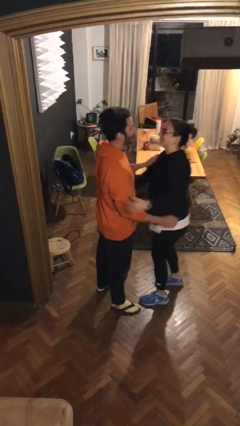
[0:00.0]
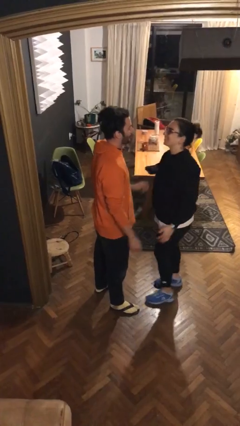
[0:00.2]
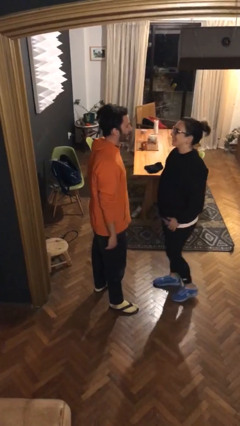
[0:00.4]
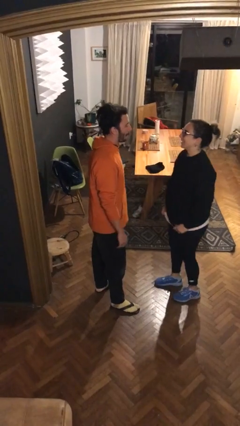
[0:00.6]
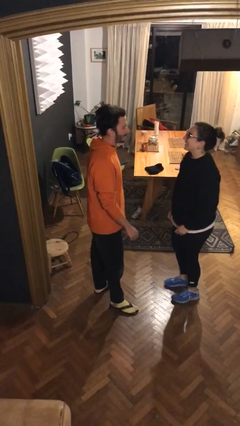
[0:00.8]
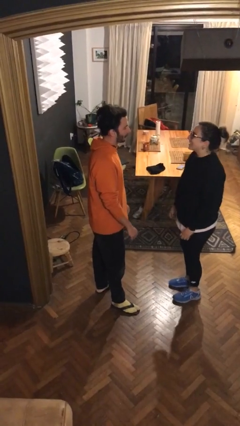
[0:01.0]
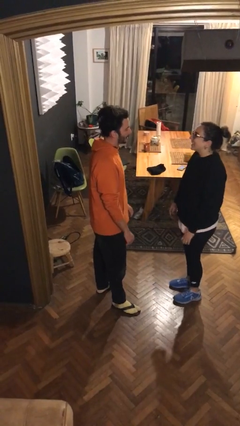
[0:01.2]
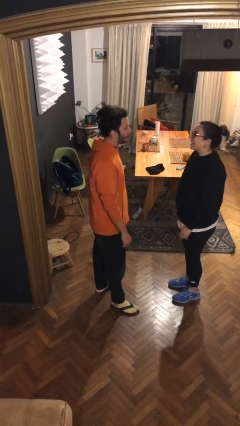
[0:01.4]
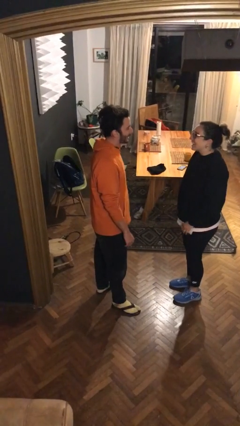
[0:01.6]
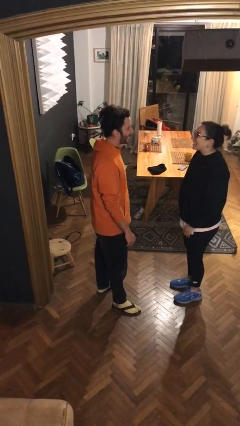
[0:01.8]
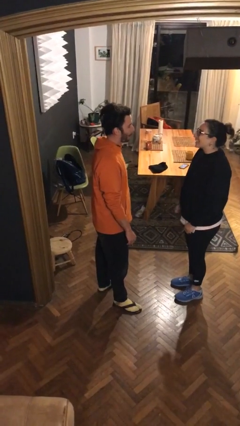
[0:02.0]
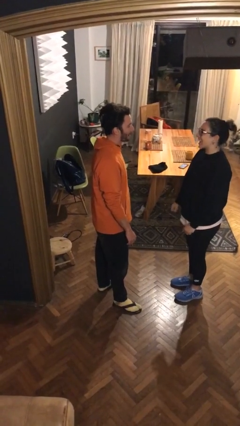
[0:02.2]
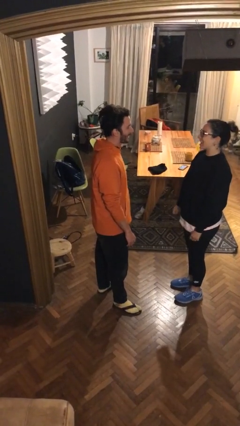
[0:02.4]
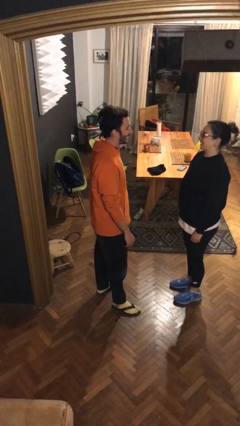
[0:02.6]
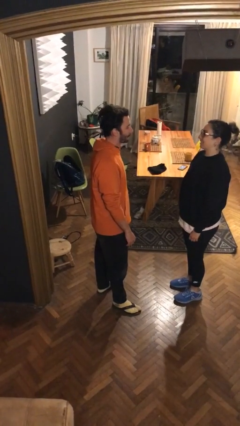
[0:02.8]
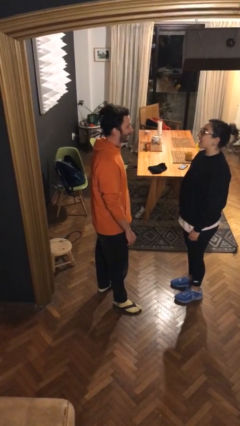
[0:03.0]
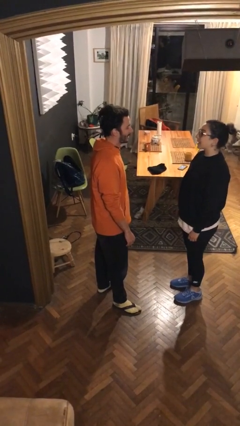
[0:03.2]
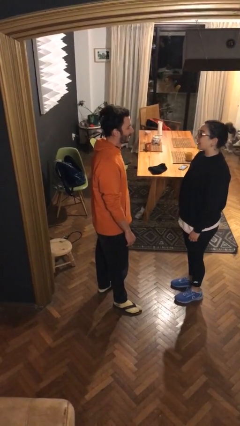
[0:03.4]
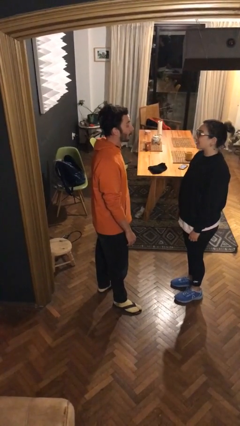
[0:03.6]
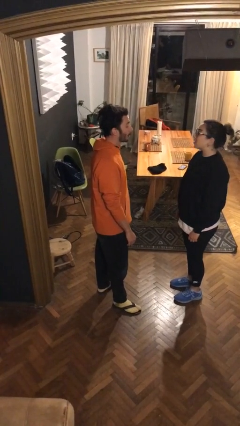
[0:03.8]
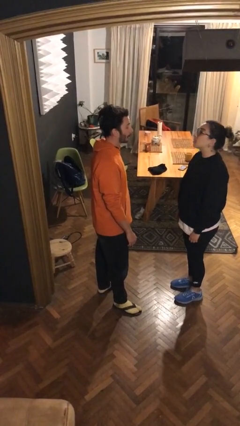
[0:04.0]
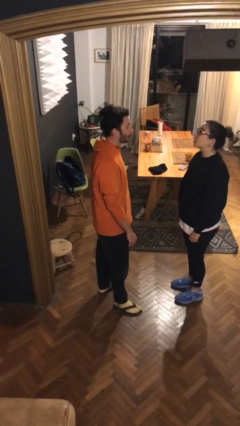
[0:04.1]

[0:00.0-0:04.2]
person talks to person

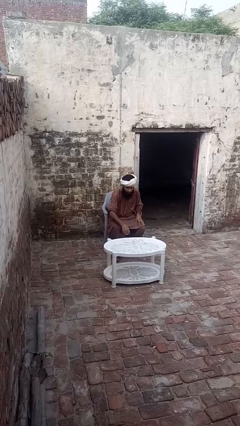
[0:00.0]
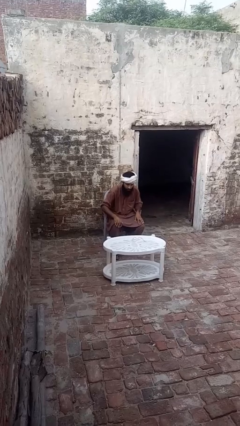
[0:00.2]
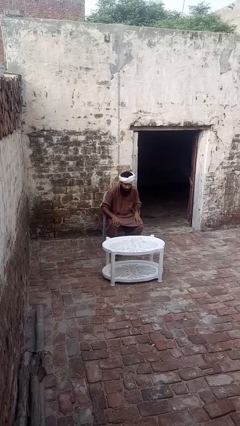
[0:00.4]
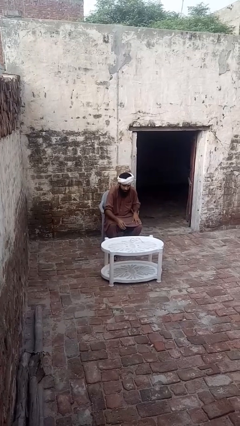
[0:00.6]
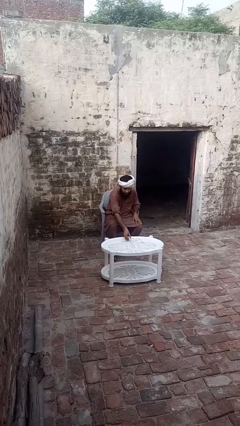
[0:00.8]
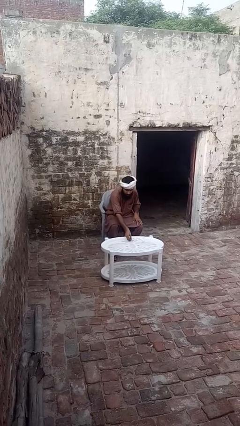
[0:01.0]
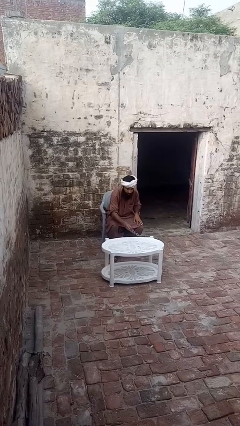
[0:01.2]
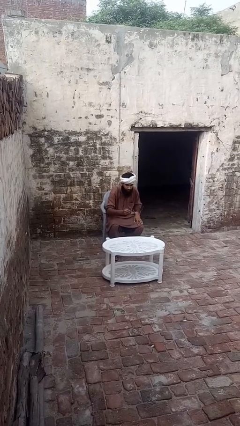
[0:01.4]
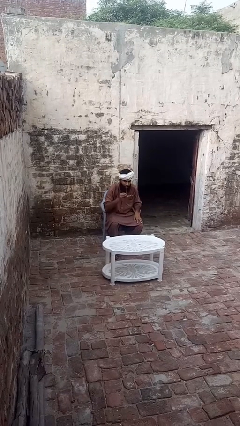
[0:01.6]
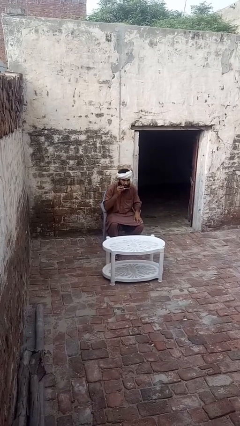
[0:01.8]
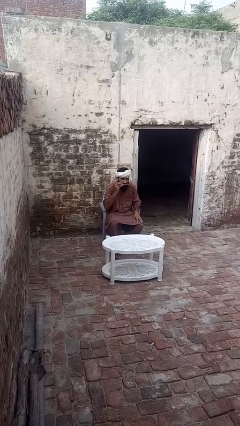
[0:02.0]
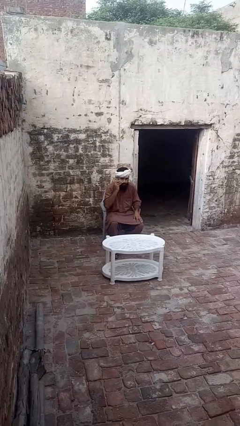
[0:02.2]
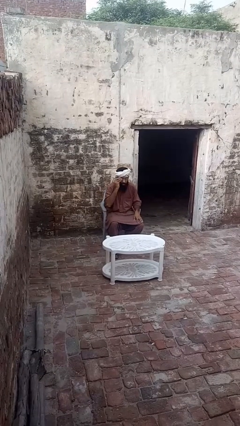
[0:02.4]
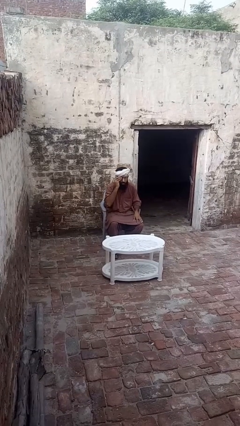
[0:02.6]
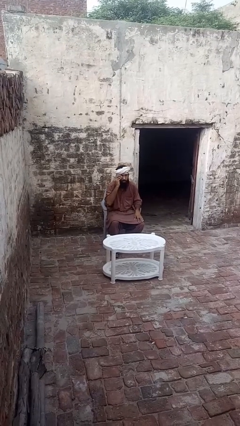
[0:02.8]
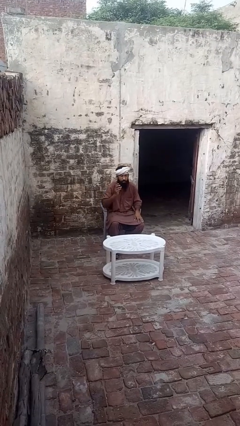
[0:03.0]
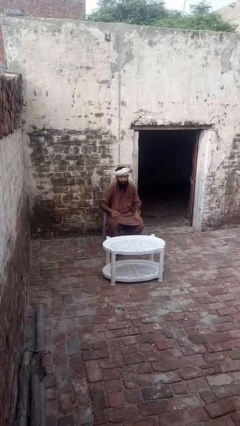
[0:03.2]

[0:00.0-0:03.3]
person puts on glasses

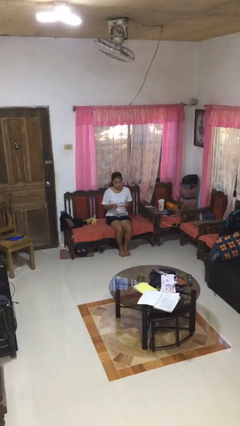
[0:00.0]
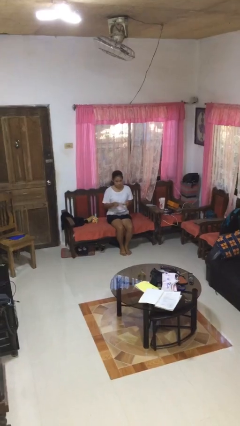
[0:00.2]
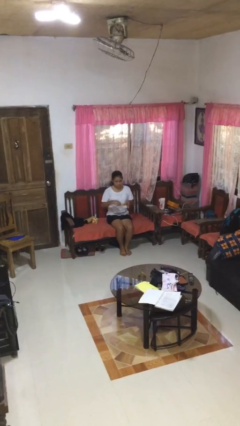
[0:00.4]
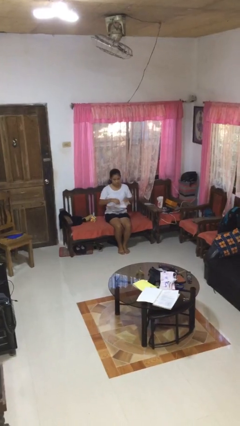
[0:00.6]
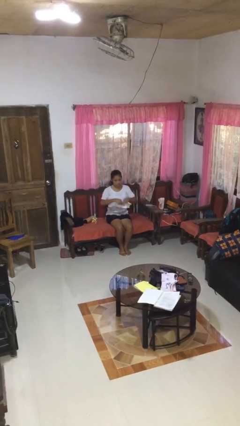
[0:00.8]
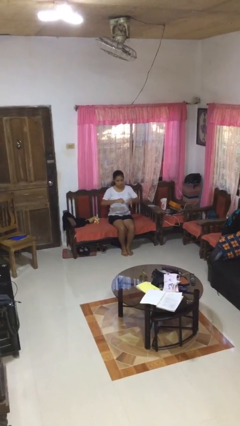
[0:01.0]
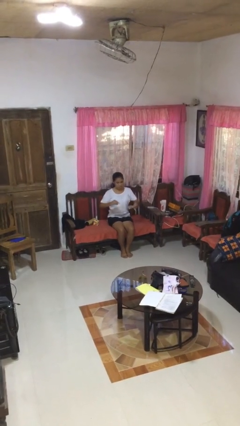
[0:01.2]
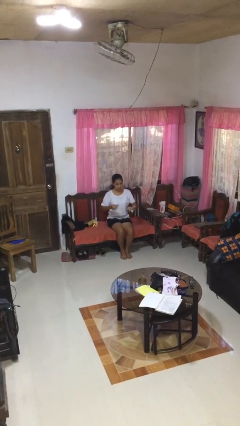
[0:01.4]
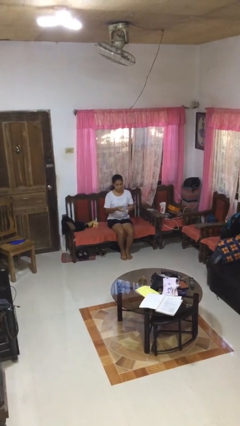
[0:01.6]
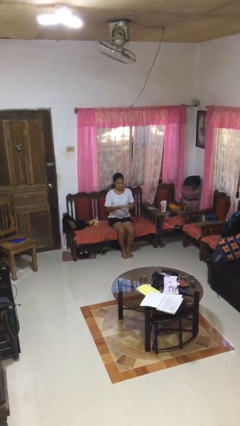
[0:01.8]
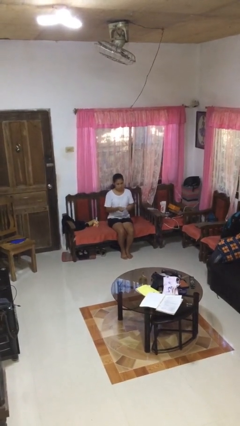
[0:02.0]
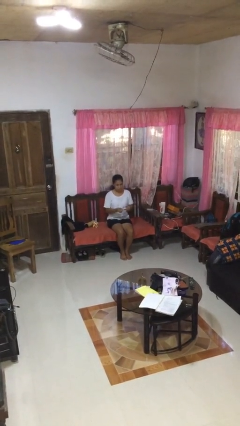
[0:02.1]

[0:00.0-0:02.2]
person tears paper

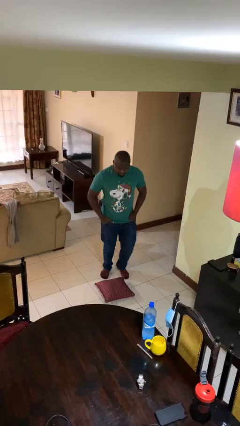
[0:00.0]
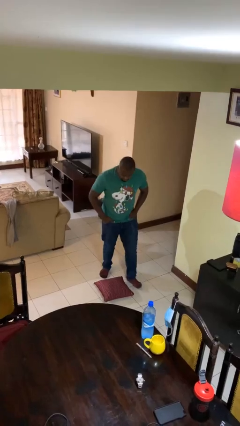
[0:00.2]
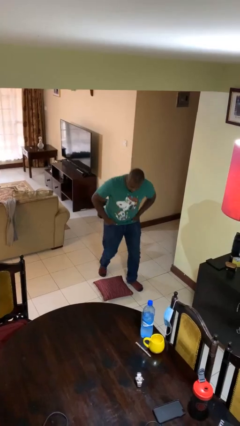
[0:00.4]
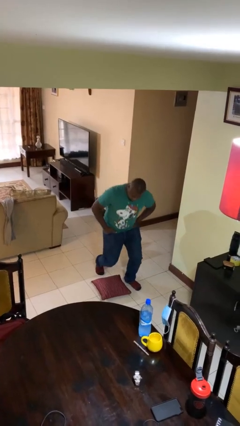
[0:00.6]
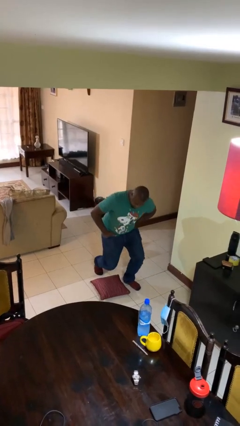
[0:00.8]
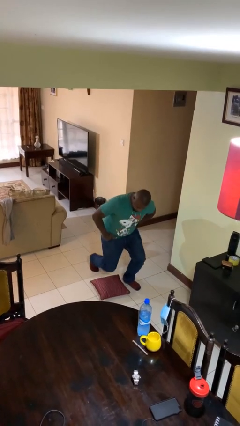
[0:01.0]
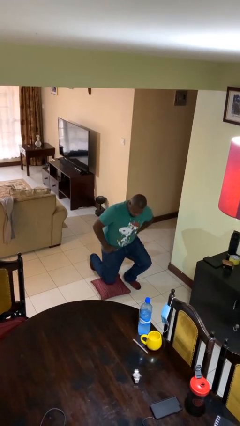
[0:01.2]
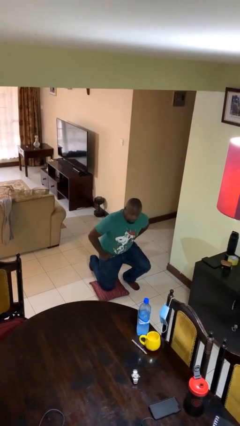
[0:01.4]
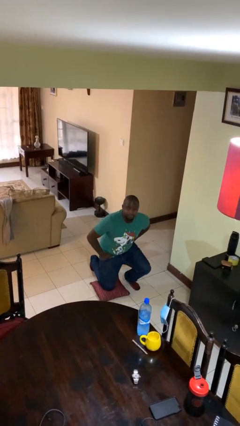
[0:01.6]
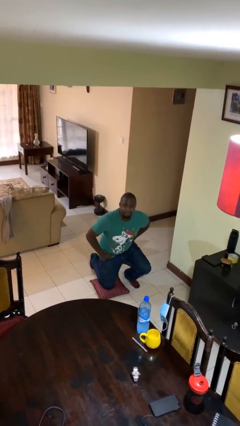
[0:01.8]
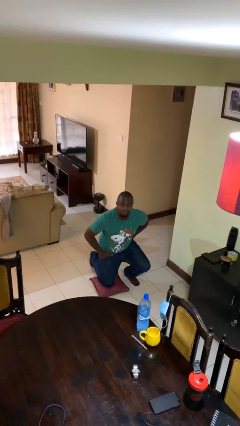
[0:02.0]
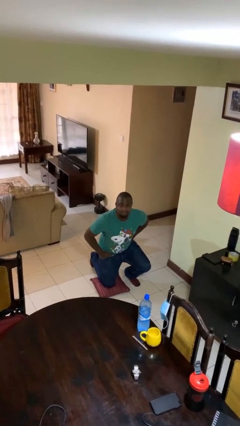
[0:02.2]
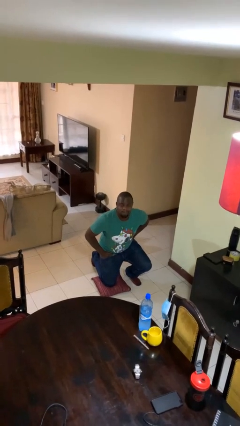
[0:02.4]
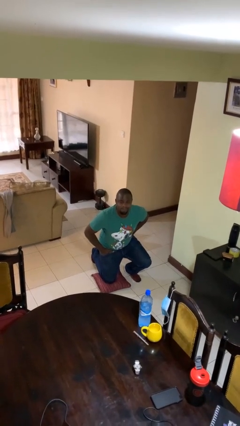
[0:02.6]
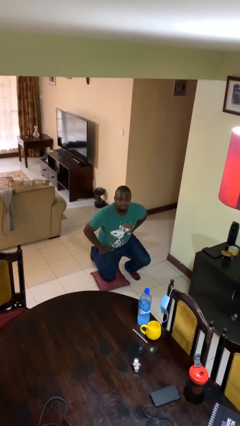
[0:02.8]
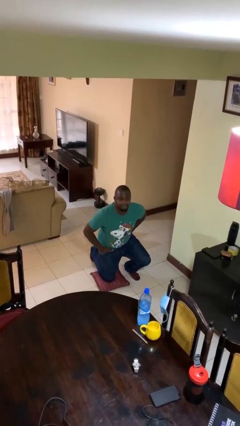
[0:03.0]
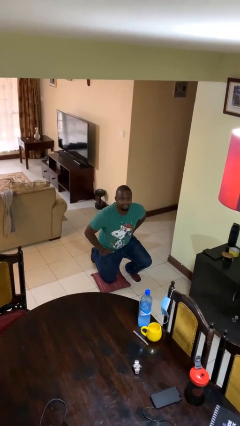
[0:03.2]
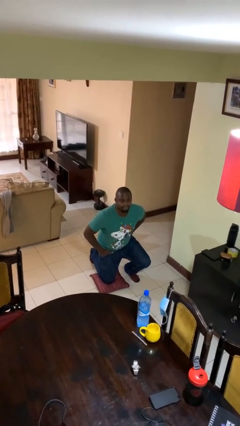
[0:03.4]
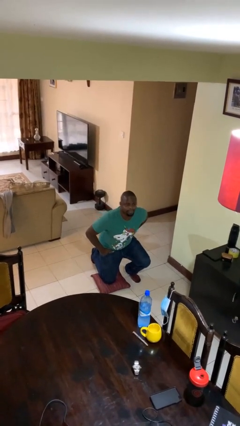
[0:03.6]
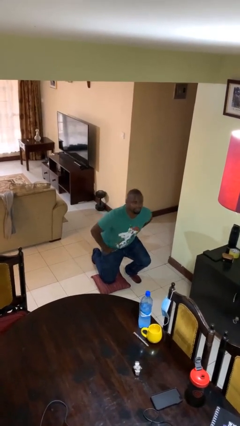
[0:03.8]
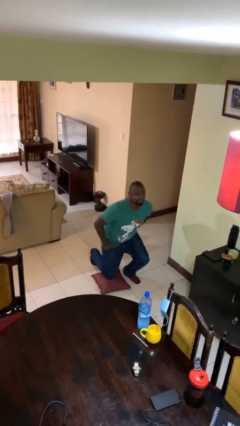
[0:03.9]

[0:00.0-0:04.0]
person kneels

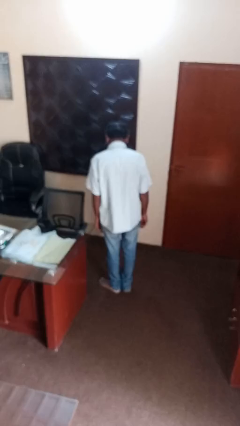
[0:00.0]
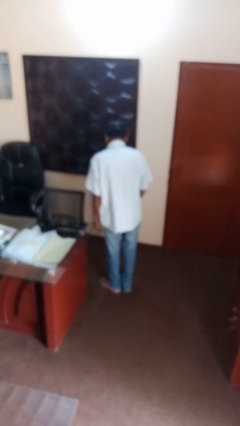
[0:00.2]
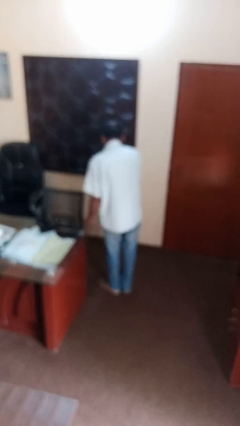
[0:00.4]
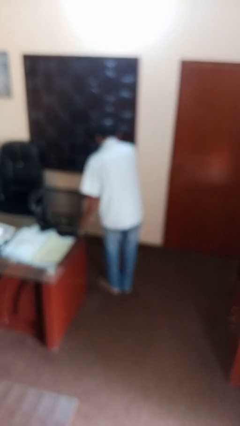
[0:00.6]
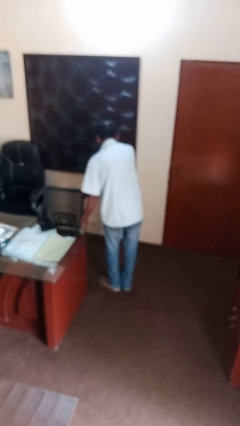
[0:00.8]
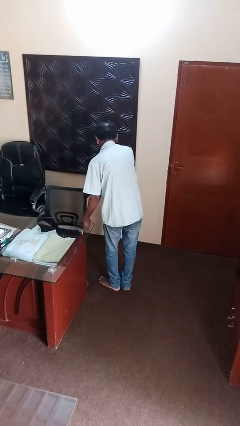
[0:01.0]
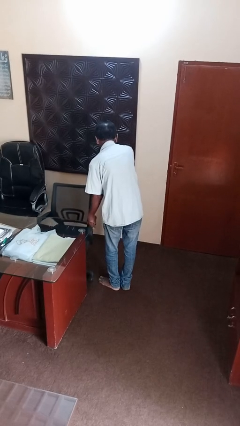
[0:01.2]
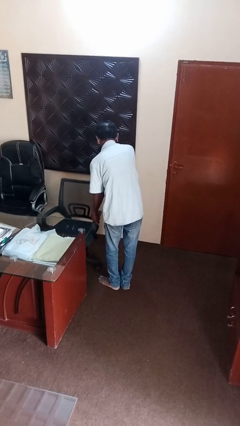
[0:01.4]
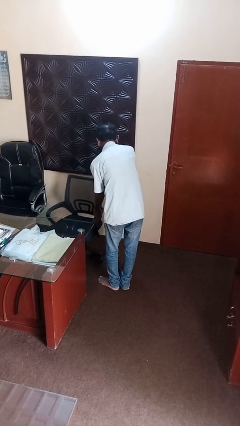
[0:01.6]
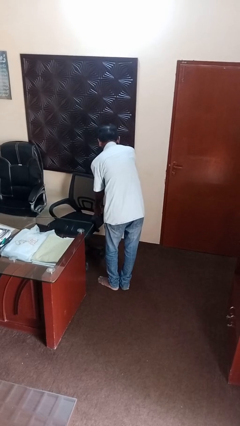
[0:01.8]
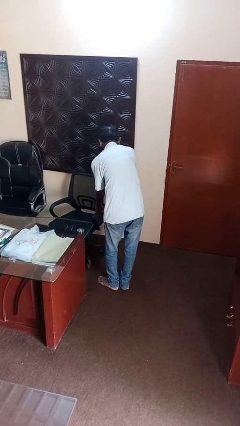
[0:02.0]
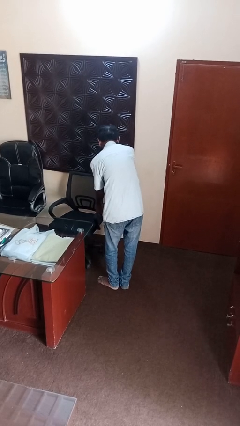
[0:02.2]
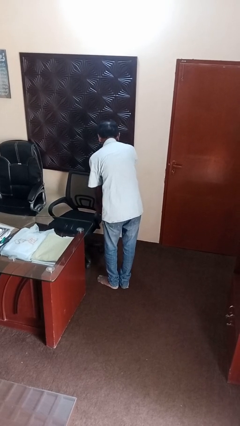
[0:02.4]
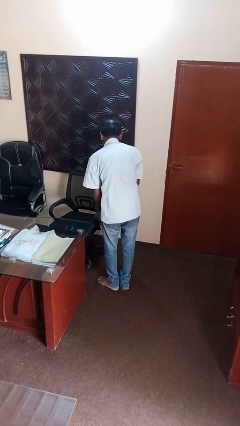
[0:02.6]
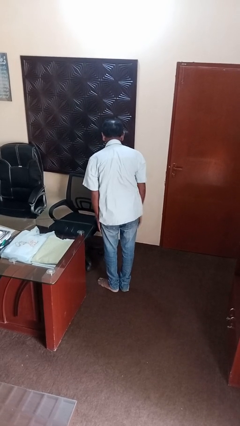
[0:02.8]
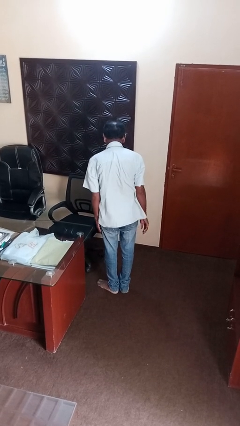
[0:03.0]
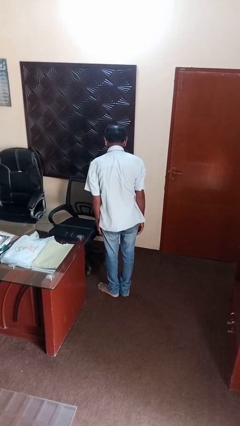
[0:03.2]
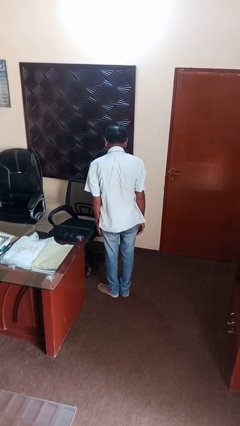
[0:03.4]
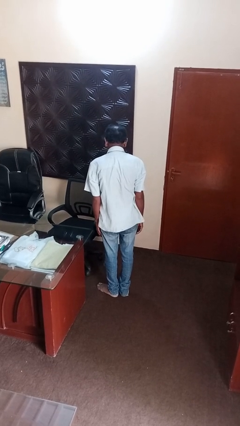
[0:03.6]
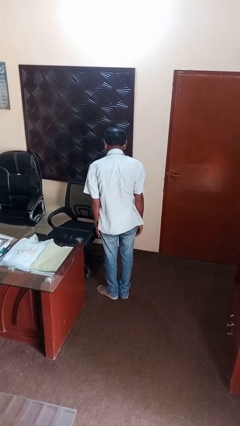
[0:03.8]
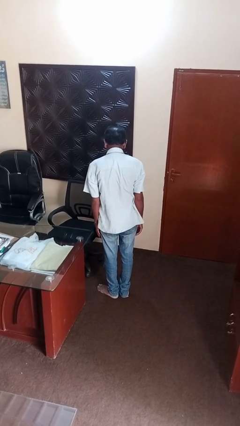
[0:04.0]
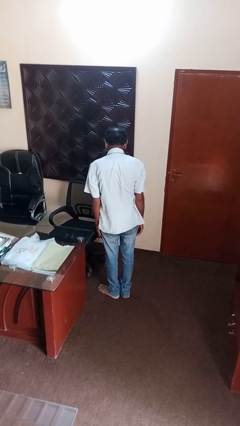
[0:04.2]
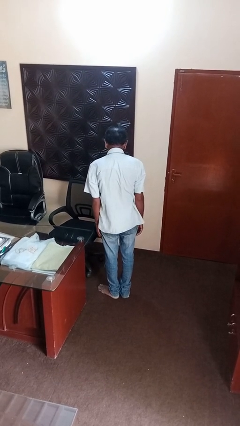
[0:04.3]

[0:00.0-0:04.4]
person pulls out chair
